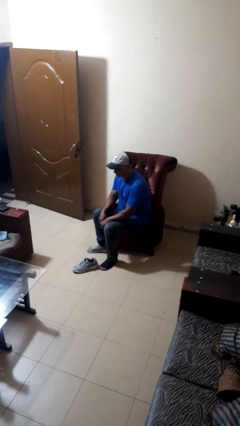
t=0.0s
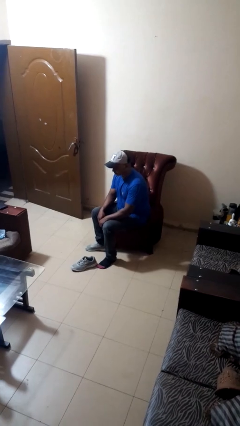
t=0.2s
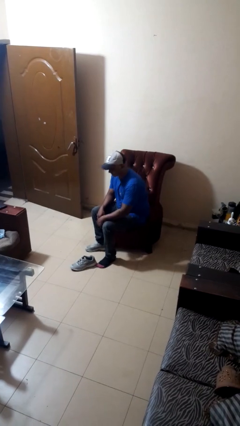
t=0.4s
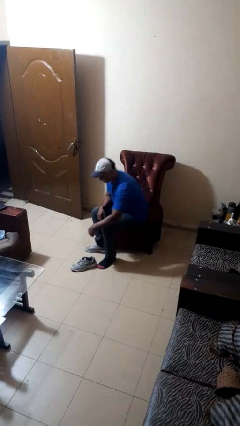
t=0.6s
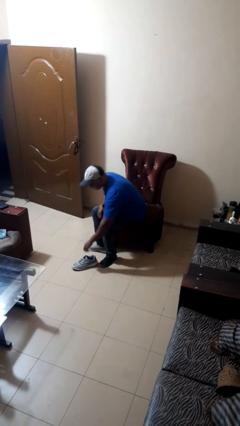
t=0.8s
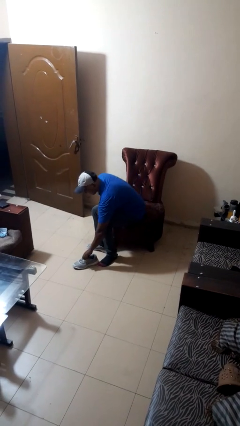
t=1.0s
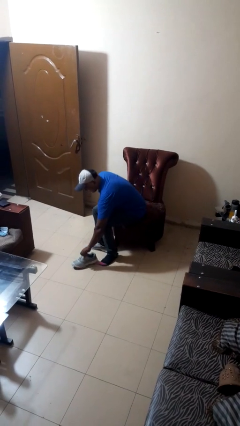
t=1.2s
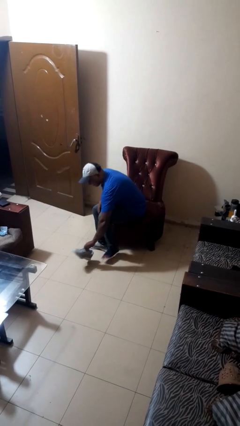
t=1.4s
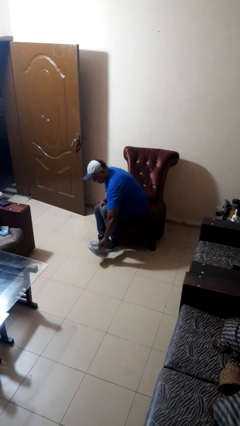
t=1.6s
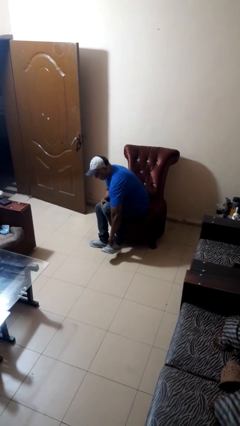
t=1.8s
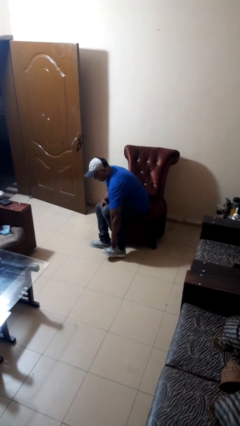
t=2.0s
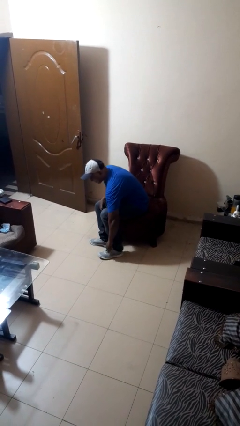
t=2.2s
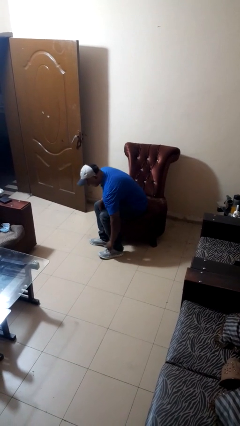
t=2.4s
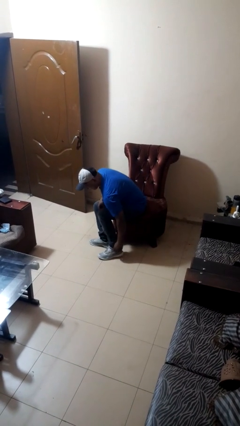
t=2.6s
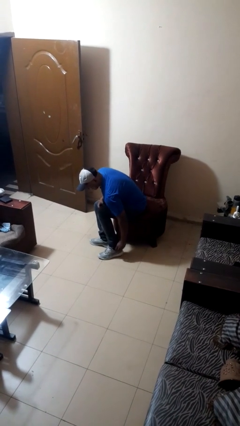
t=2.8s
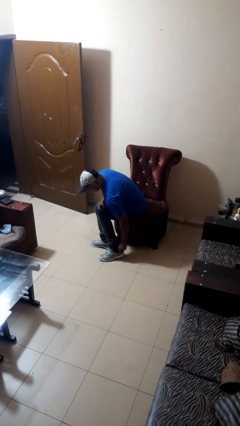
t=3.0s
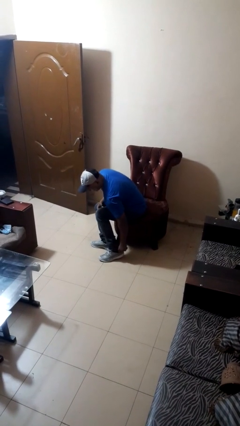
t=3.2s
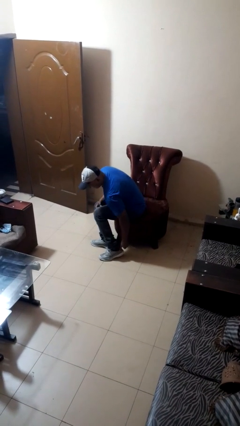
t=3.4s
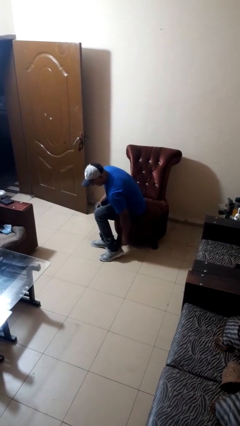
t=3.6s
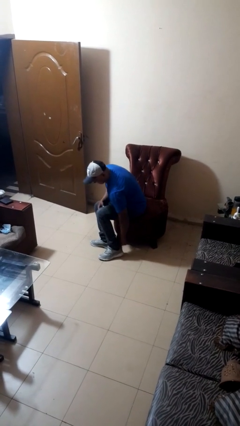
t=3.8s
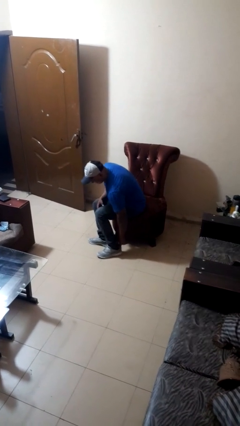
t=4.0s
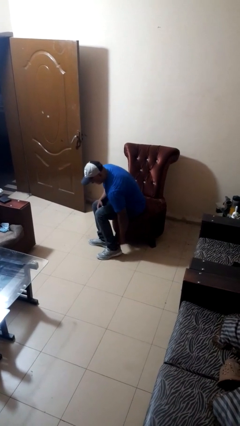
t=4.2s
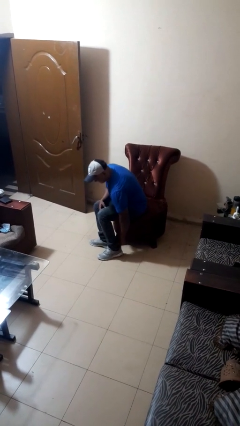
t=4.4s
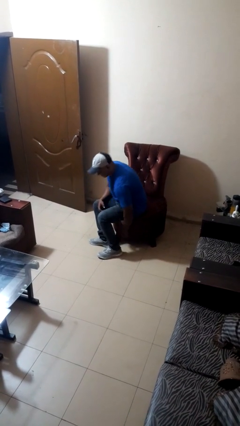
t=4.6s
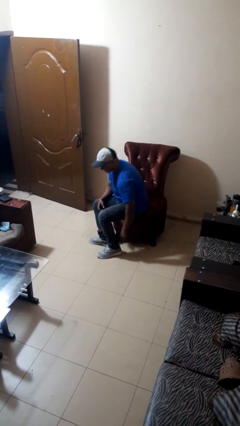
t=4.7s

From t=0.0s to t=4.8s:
person puts on boots

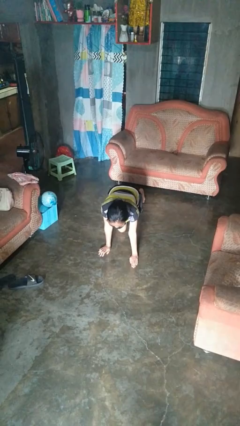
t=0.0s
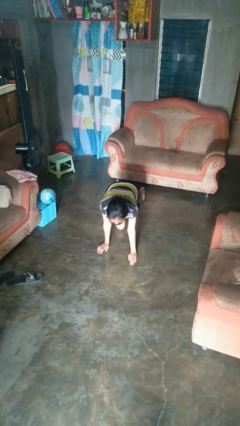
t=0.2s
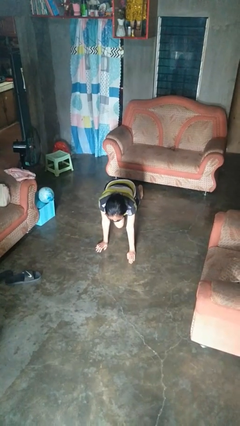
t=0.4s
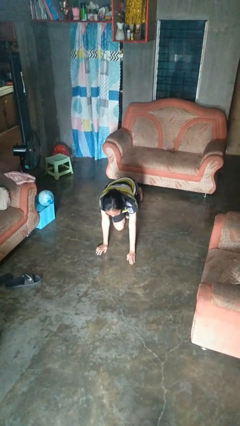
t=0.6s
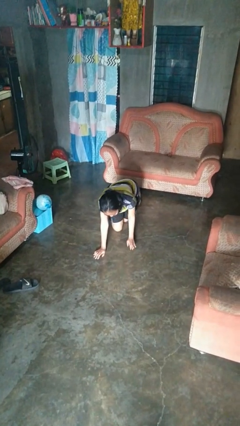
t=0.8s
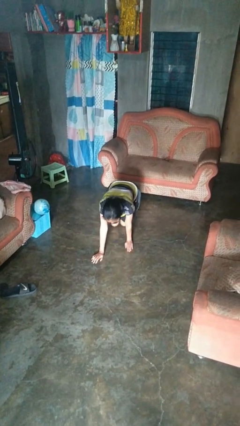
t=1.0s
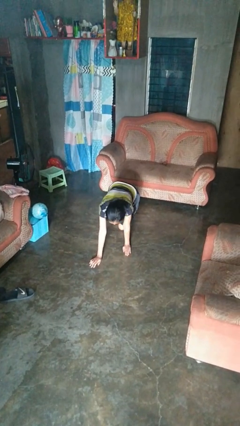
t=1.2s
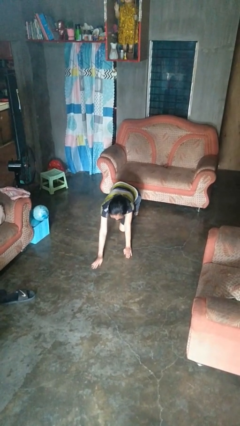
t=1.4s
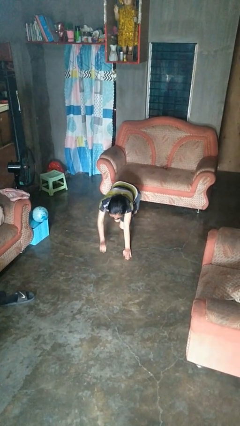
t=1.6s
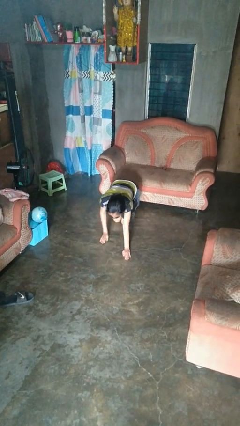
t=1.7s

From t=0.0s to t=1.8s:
person crawls

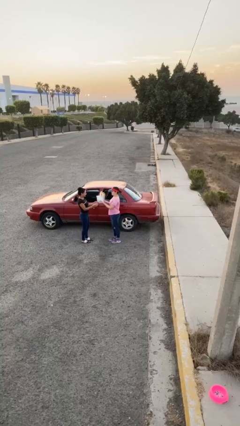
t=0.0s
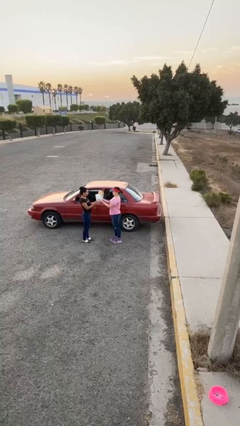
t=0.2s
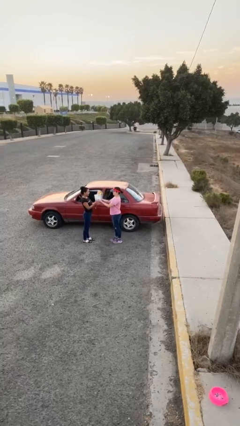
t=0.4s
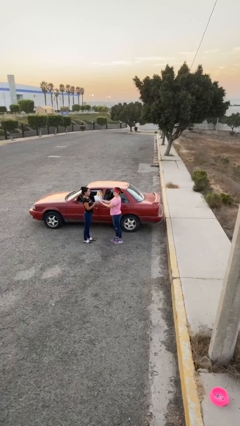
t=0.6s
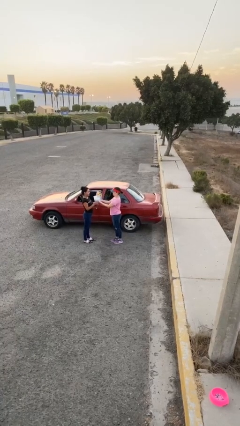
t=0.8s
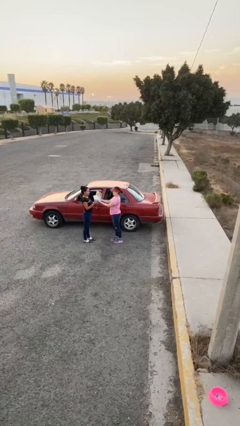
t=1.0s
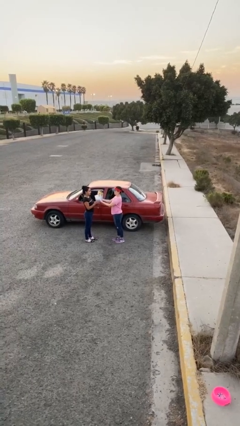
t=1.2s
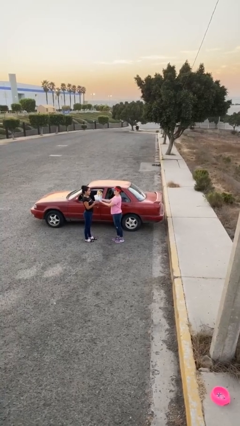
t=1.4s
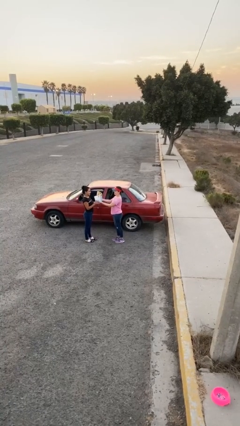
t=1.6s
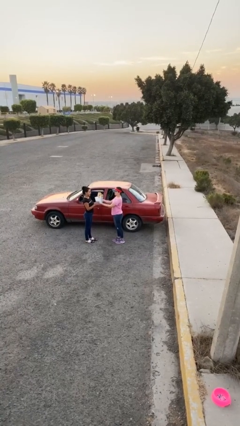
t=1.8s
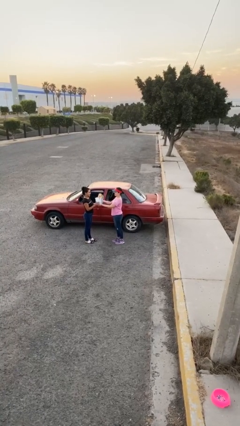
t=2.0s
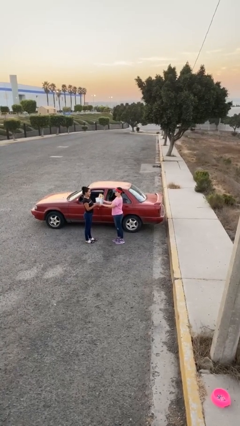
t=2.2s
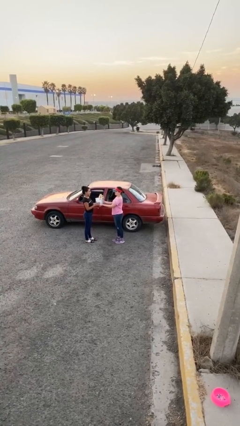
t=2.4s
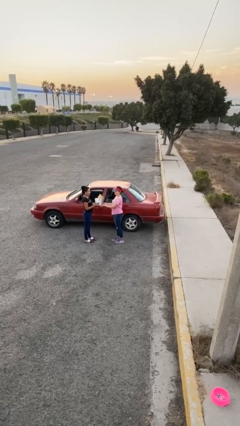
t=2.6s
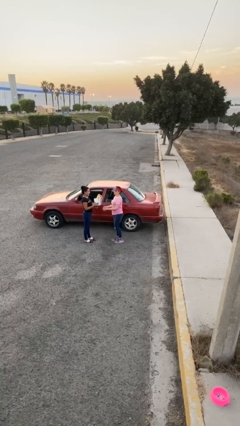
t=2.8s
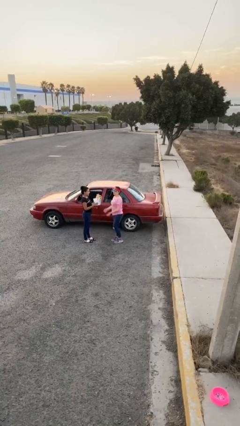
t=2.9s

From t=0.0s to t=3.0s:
person transfers object to person

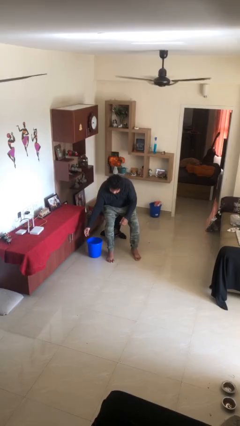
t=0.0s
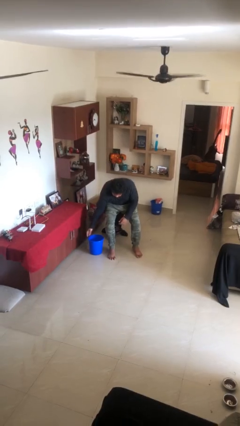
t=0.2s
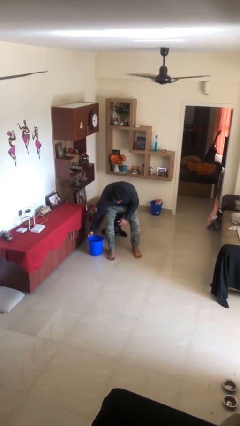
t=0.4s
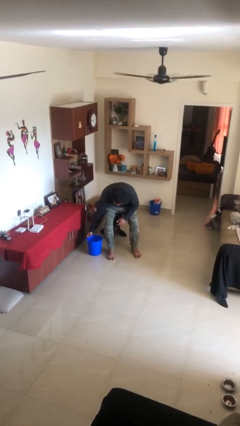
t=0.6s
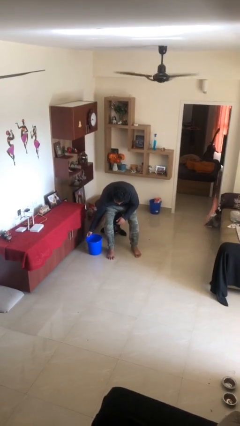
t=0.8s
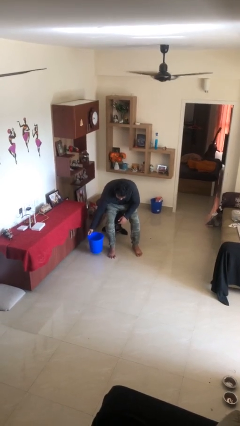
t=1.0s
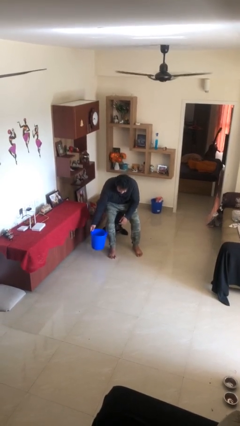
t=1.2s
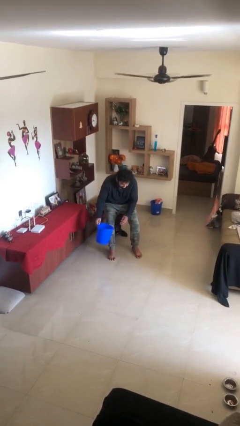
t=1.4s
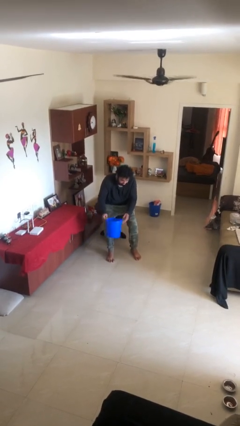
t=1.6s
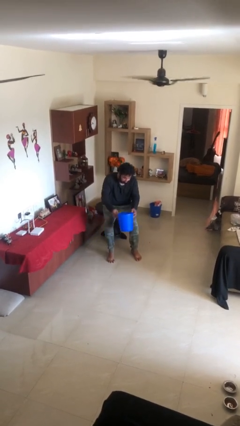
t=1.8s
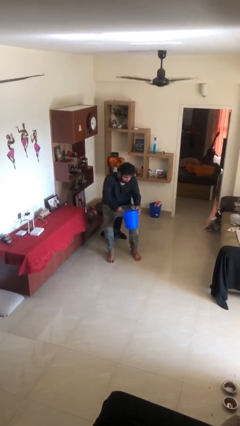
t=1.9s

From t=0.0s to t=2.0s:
person picks up object from floor

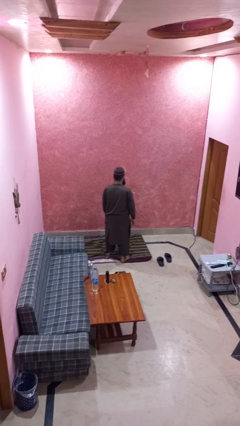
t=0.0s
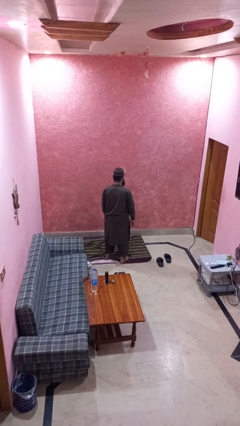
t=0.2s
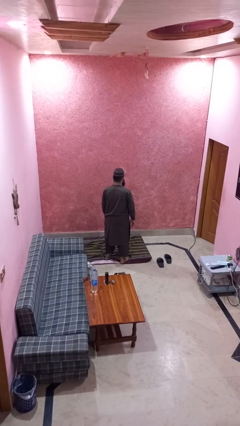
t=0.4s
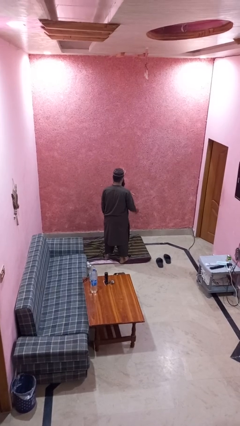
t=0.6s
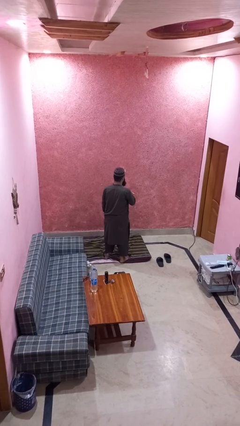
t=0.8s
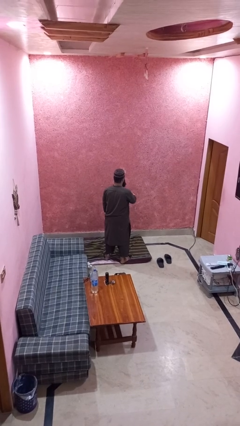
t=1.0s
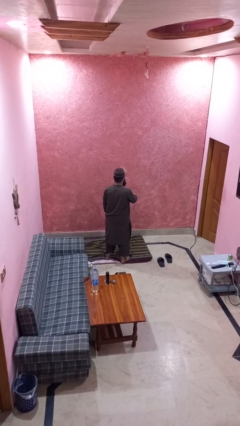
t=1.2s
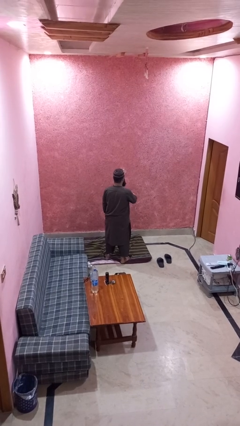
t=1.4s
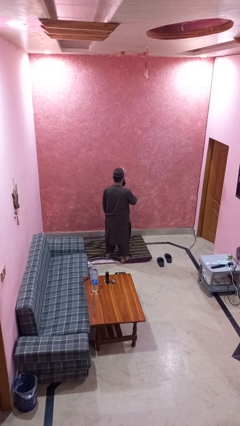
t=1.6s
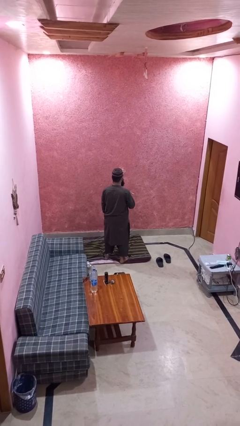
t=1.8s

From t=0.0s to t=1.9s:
person drums on chest

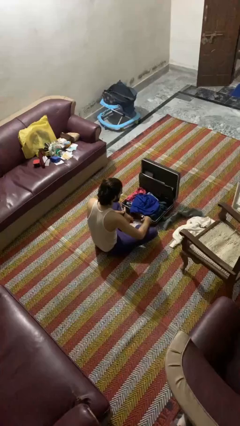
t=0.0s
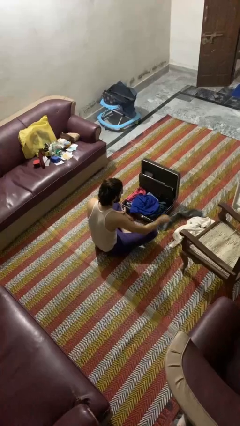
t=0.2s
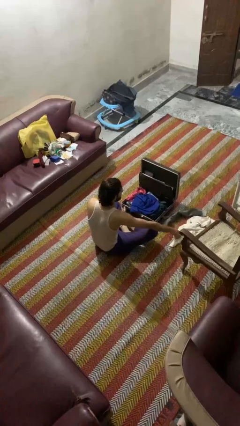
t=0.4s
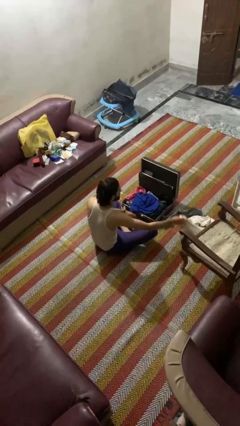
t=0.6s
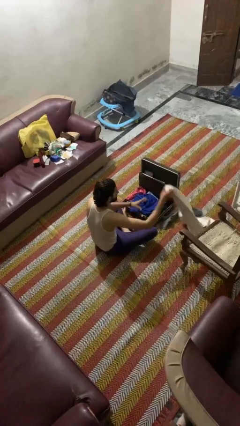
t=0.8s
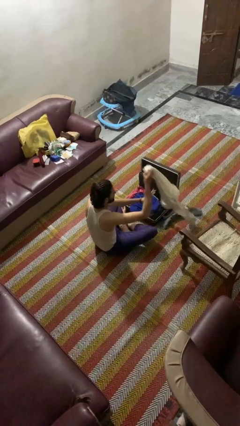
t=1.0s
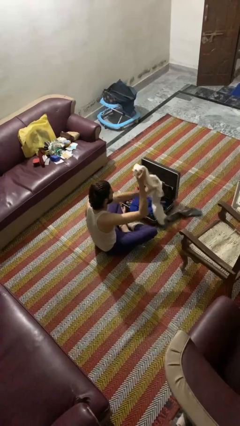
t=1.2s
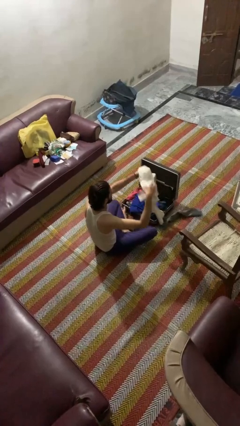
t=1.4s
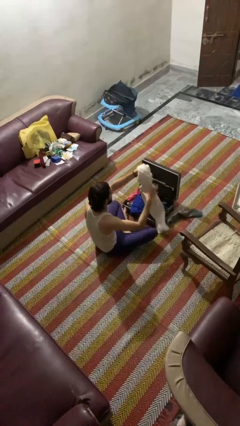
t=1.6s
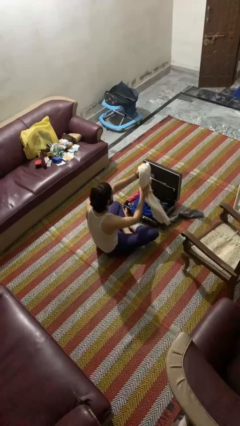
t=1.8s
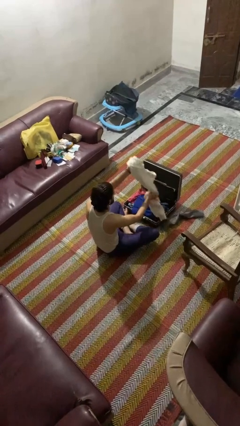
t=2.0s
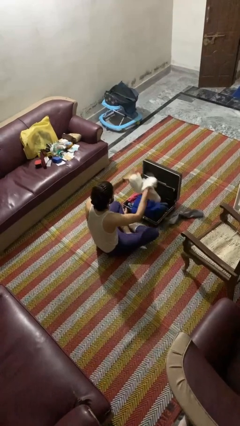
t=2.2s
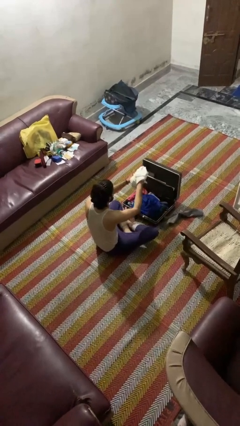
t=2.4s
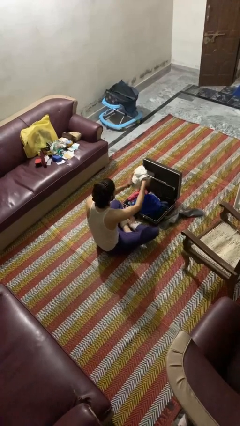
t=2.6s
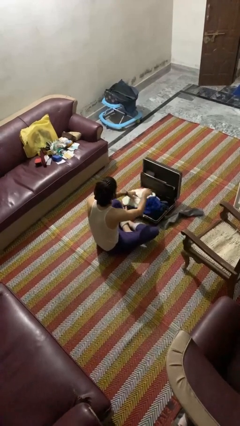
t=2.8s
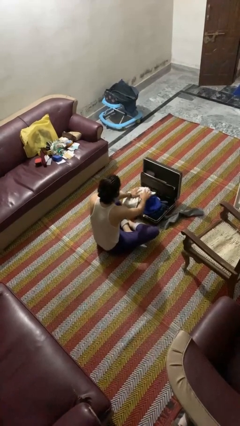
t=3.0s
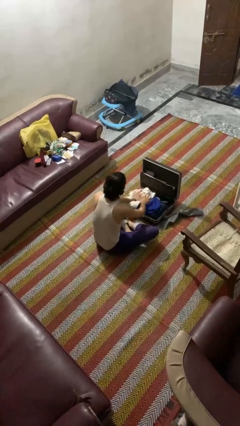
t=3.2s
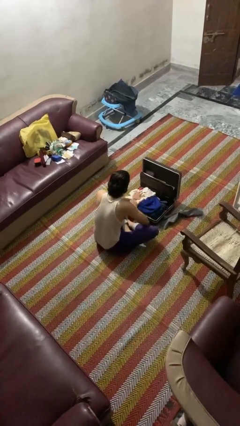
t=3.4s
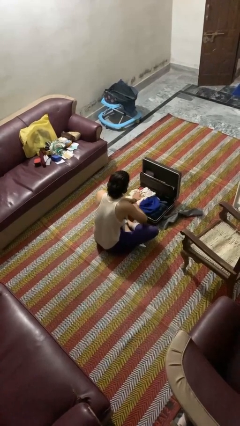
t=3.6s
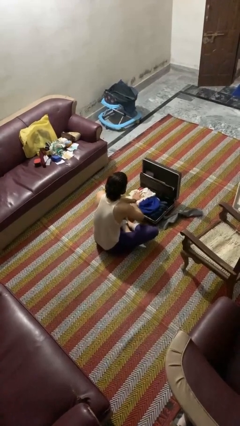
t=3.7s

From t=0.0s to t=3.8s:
person loads clothes into suitcase

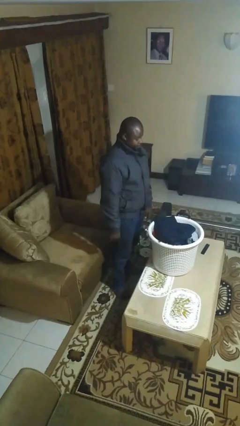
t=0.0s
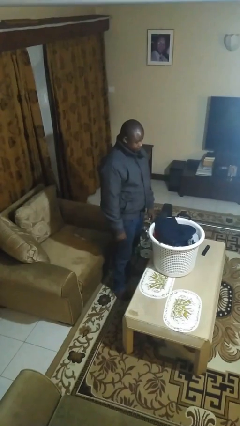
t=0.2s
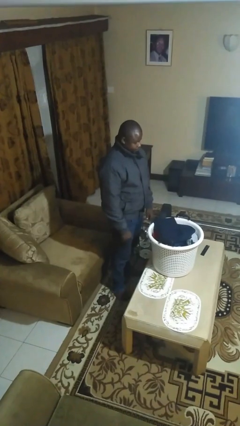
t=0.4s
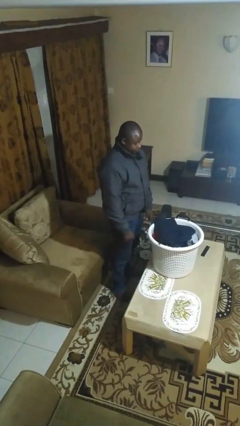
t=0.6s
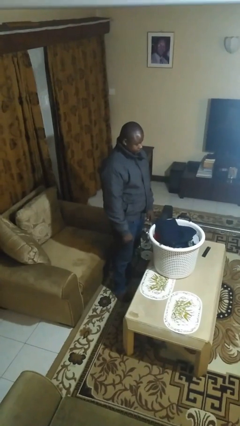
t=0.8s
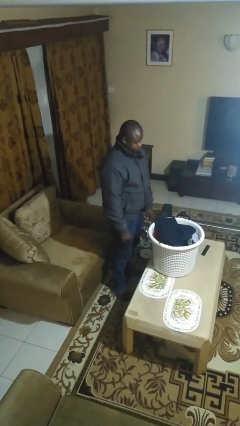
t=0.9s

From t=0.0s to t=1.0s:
person folds pants
